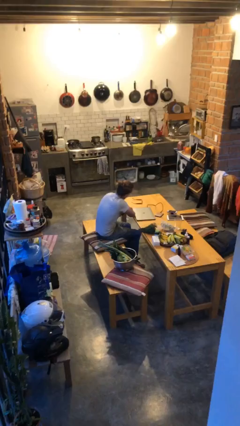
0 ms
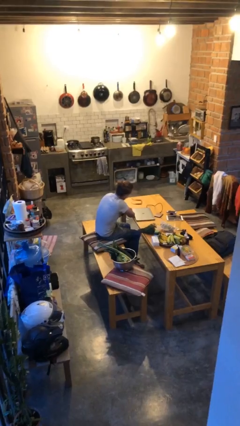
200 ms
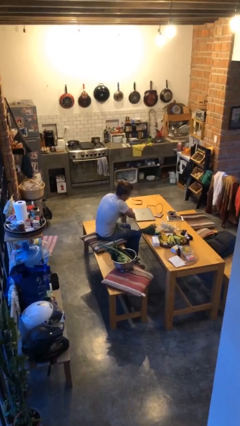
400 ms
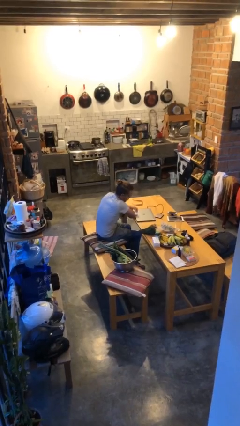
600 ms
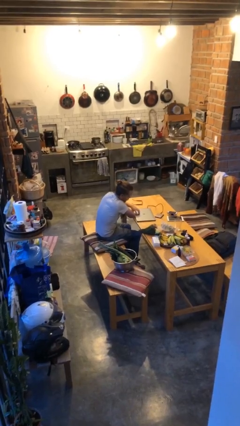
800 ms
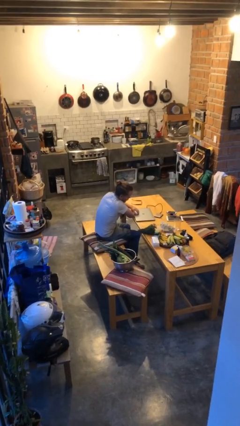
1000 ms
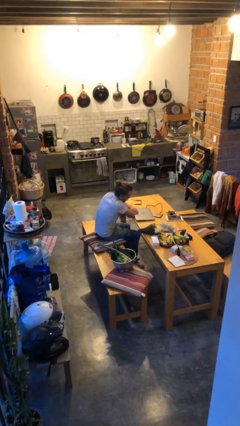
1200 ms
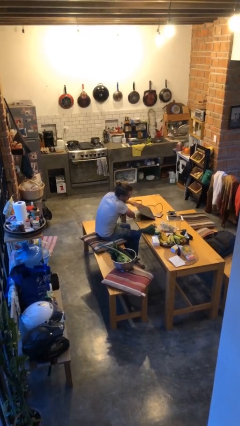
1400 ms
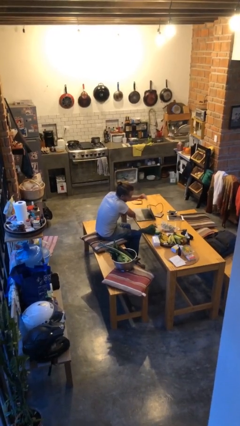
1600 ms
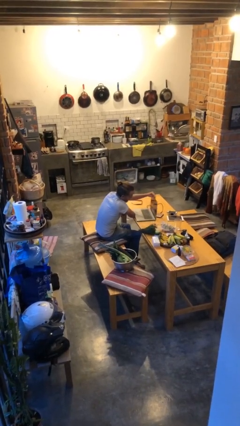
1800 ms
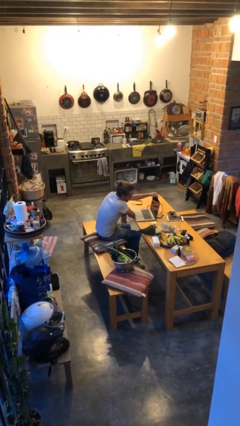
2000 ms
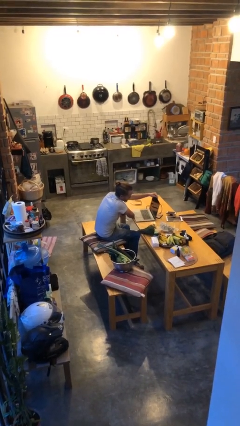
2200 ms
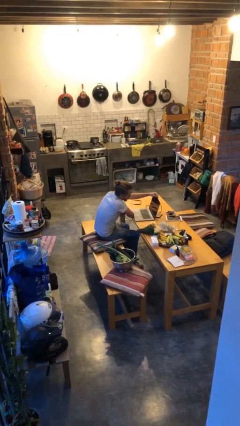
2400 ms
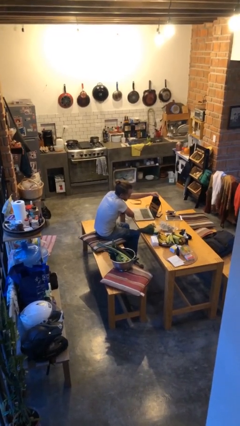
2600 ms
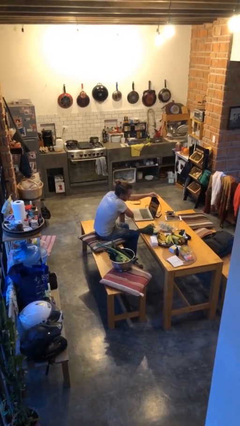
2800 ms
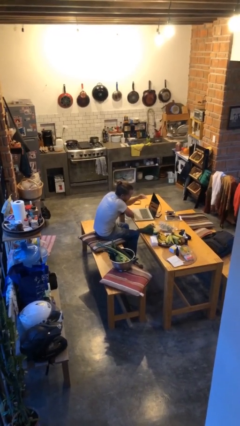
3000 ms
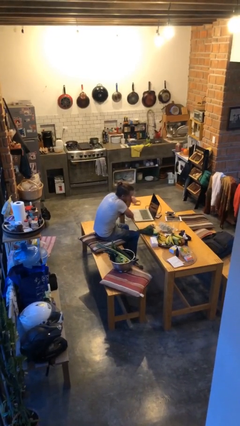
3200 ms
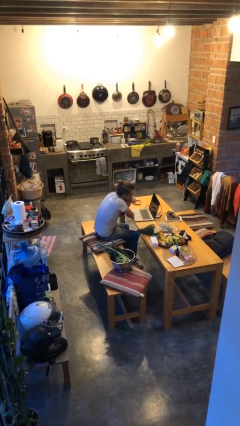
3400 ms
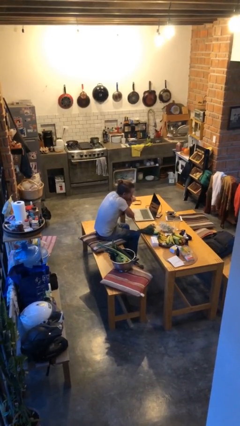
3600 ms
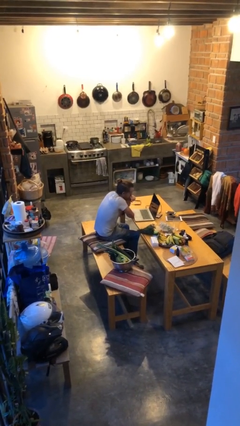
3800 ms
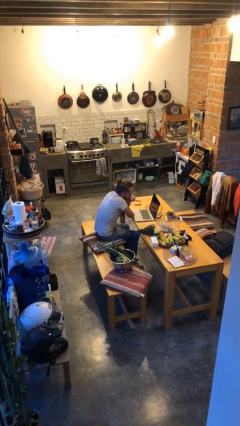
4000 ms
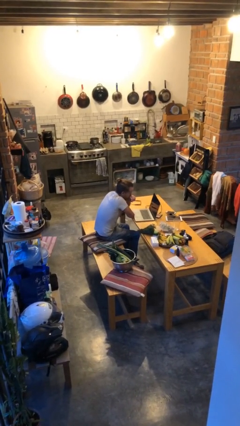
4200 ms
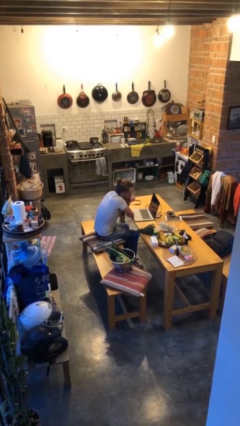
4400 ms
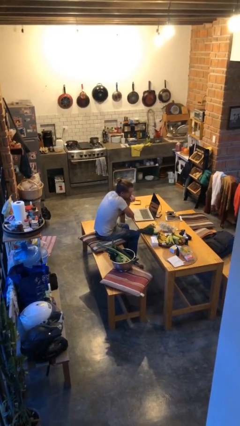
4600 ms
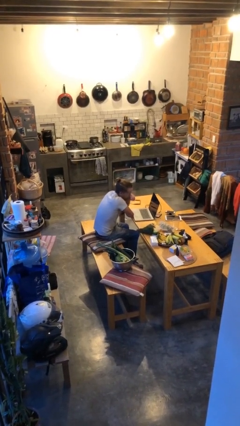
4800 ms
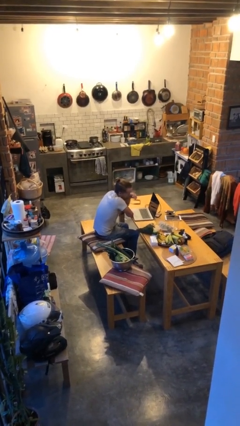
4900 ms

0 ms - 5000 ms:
person opens laptop

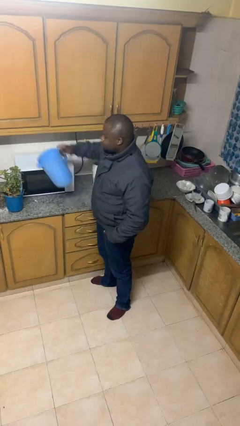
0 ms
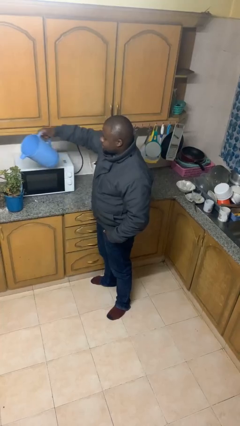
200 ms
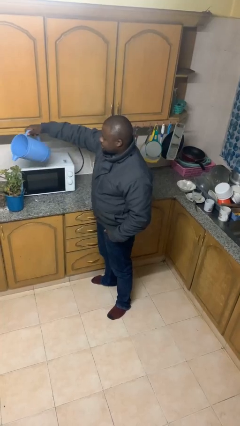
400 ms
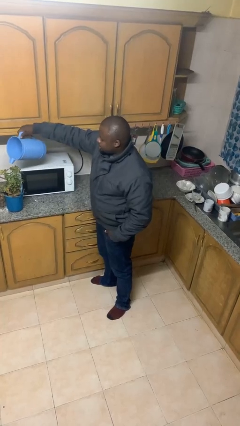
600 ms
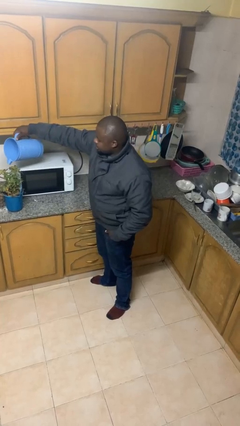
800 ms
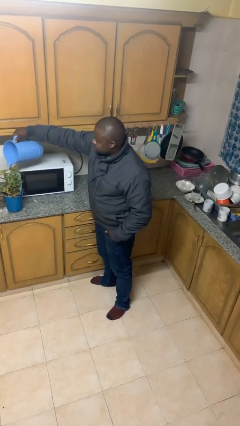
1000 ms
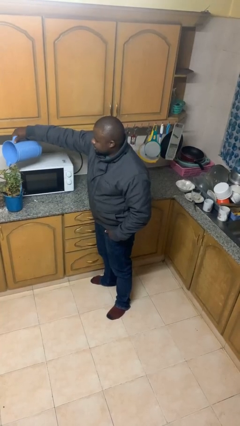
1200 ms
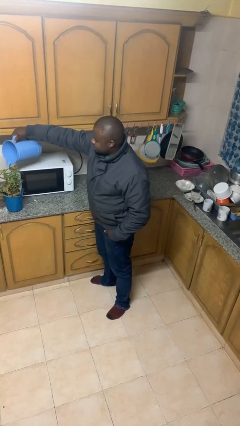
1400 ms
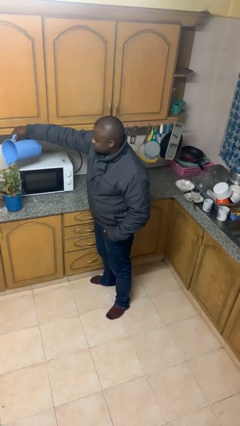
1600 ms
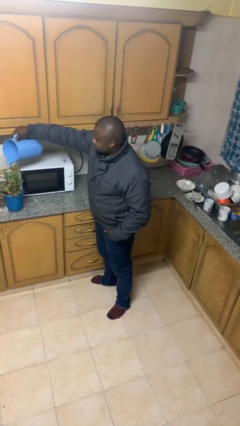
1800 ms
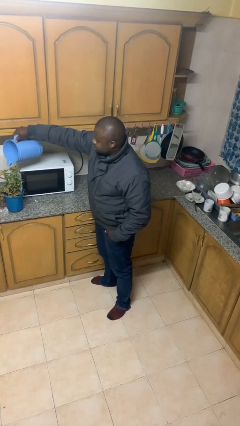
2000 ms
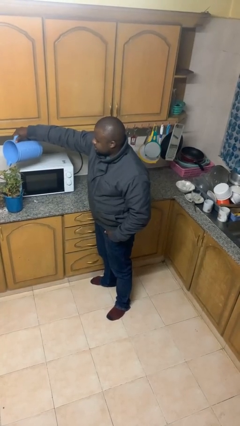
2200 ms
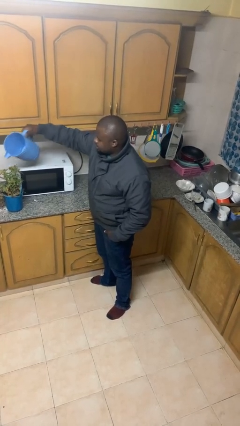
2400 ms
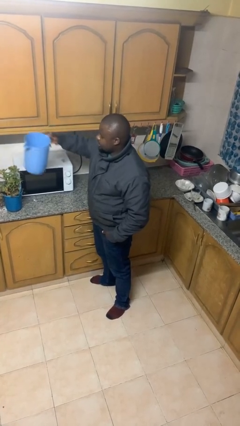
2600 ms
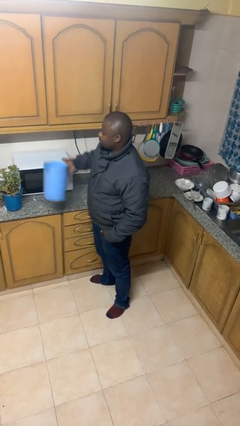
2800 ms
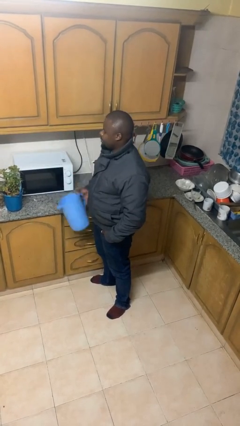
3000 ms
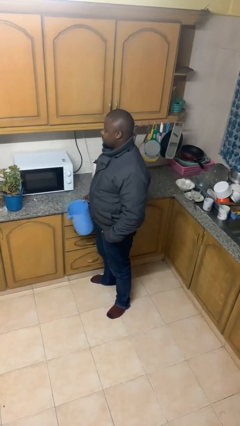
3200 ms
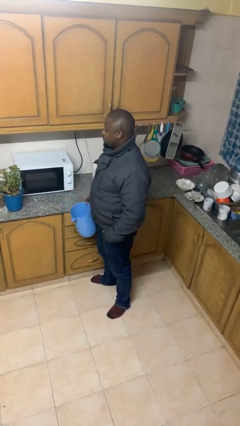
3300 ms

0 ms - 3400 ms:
person waters houseplant

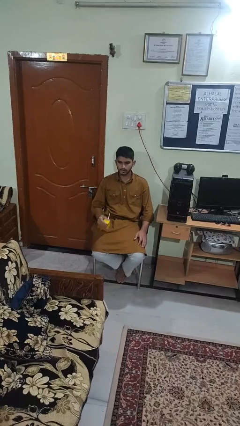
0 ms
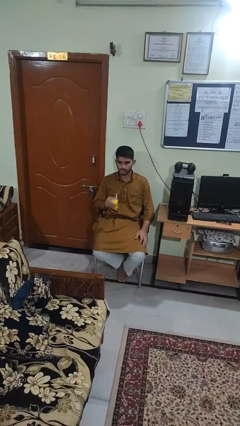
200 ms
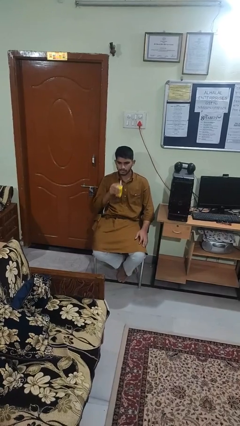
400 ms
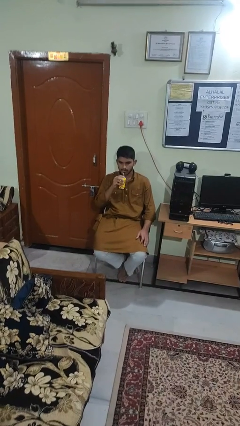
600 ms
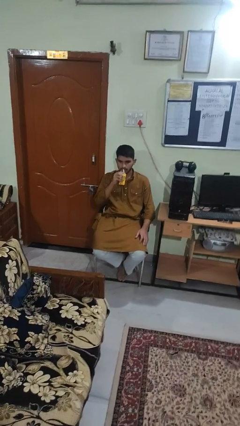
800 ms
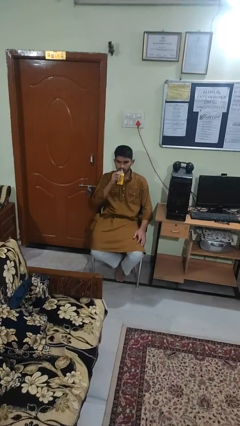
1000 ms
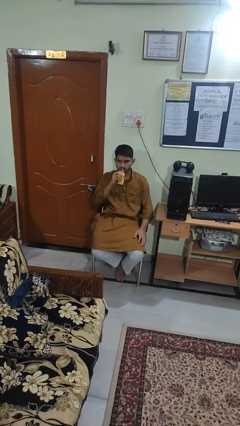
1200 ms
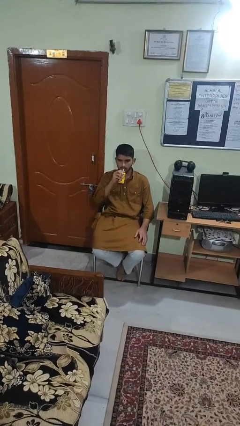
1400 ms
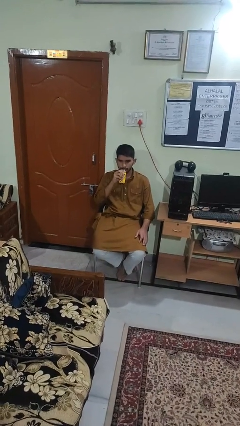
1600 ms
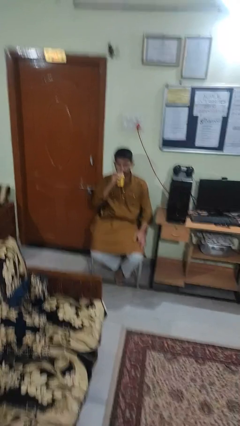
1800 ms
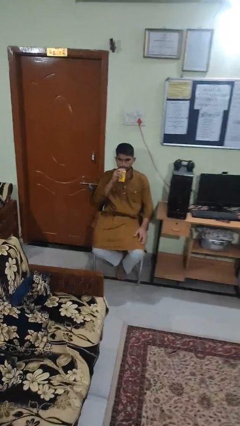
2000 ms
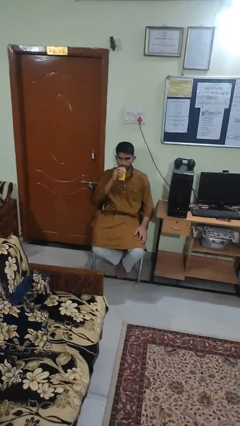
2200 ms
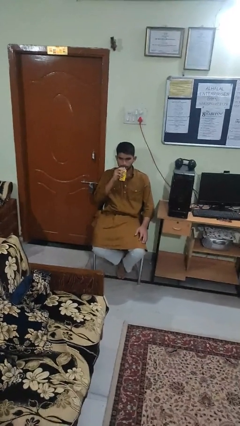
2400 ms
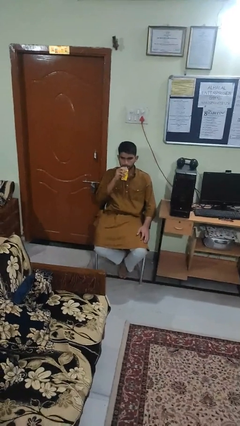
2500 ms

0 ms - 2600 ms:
person drinks from straw

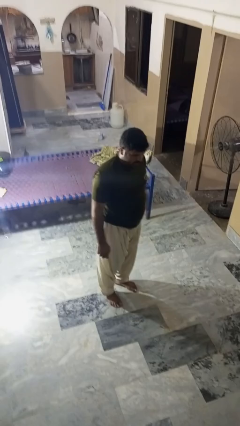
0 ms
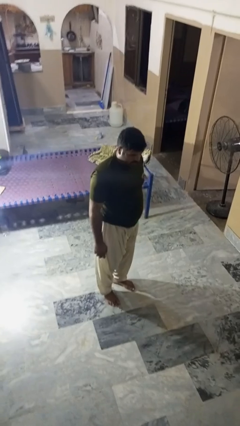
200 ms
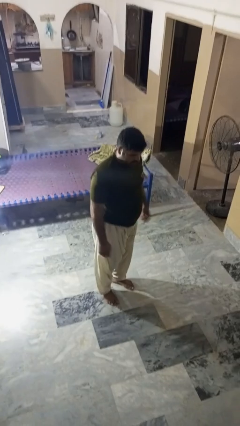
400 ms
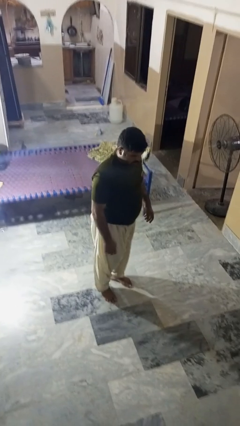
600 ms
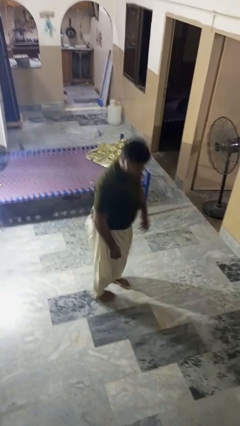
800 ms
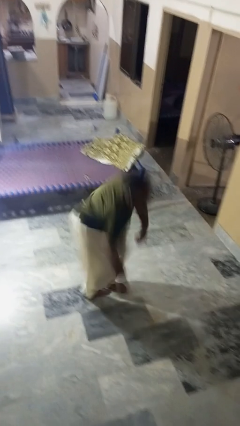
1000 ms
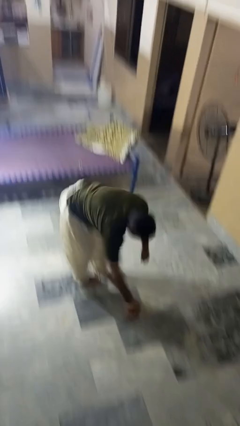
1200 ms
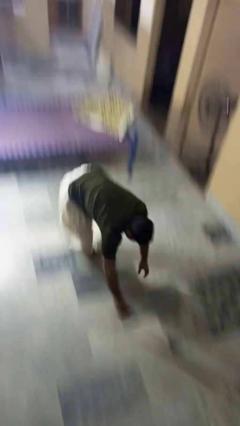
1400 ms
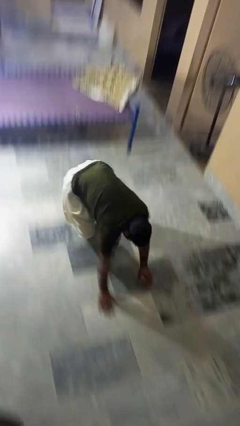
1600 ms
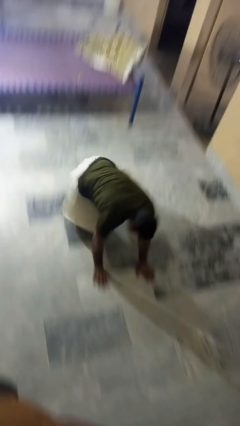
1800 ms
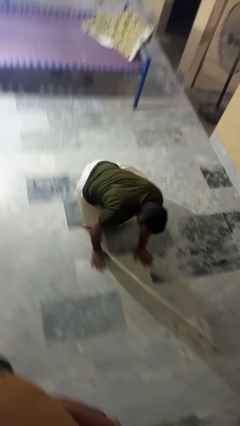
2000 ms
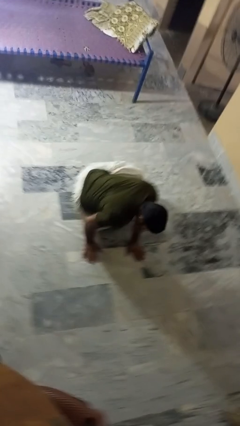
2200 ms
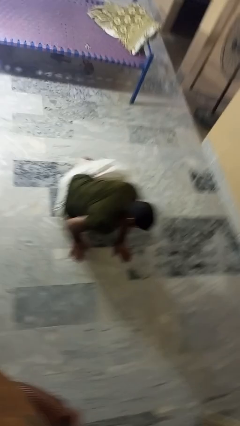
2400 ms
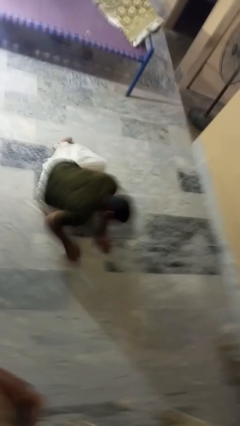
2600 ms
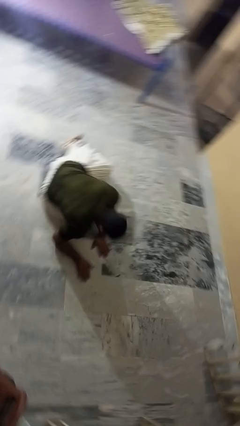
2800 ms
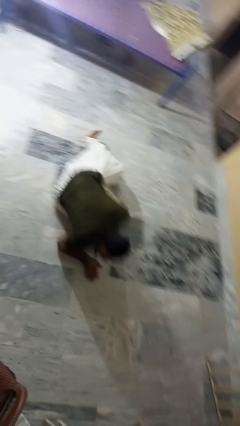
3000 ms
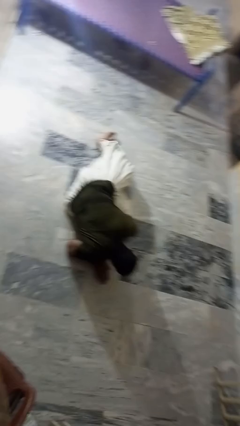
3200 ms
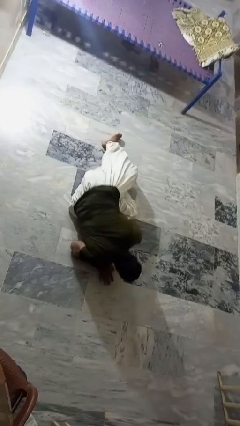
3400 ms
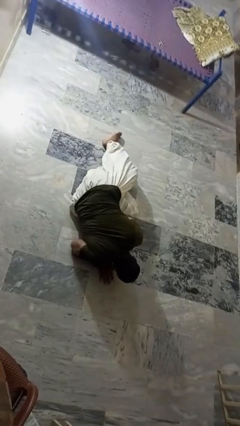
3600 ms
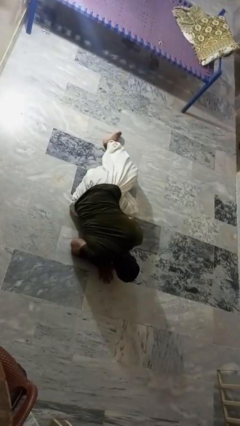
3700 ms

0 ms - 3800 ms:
person falls while standing

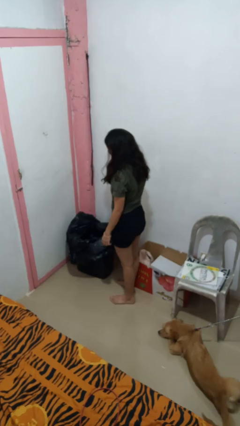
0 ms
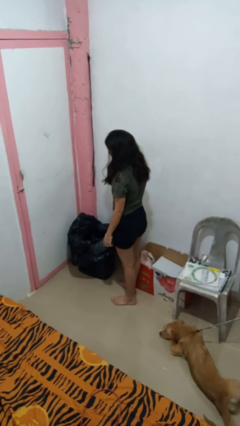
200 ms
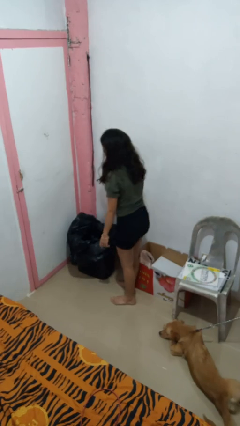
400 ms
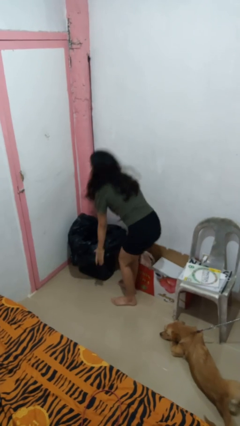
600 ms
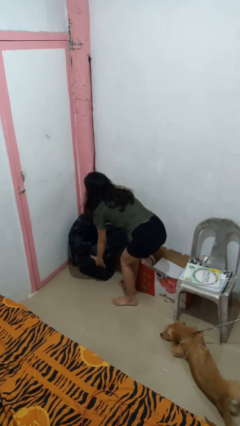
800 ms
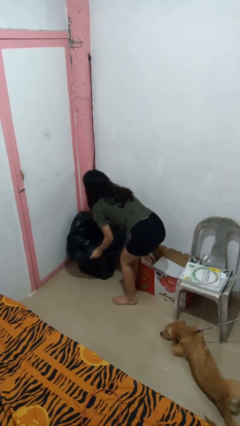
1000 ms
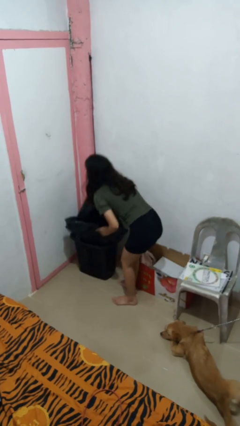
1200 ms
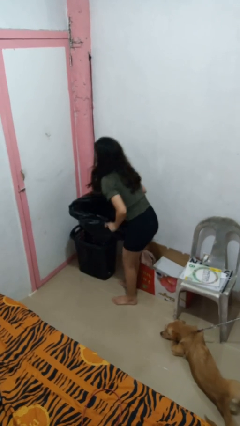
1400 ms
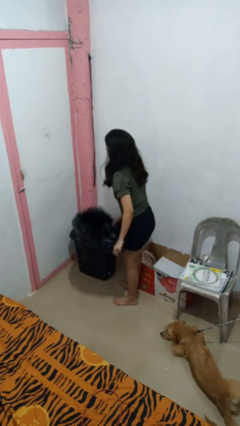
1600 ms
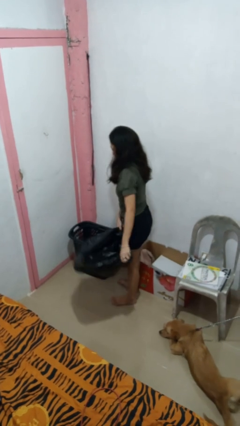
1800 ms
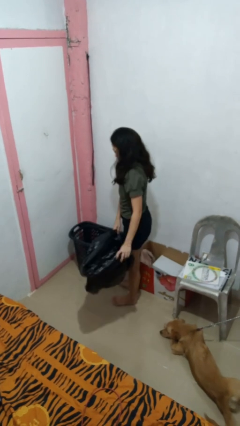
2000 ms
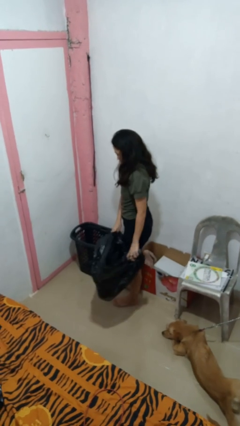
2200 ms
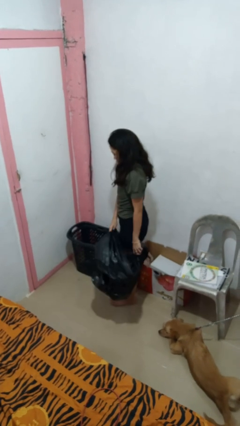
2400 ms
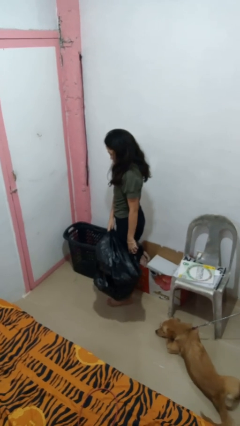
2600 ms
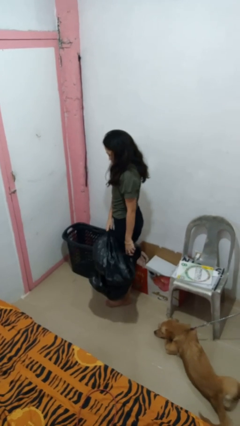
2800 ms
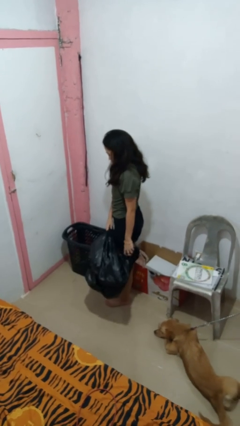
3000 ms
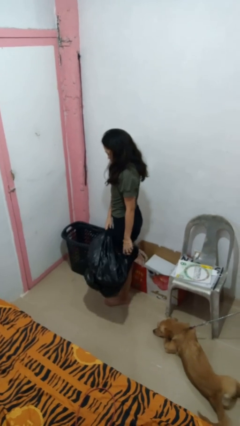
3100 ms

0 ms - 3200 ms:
person removes trashbag from trashcan
